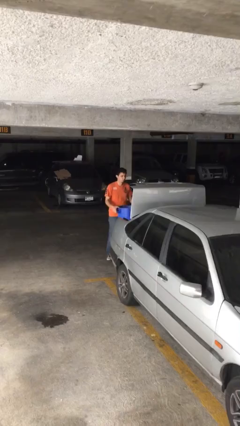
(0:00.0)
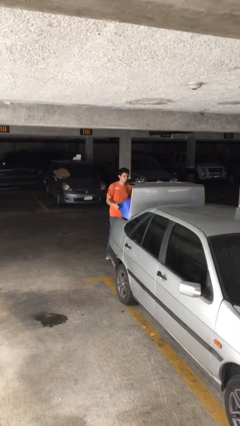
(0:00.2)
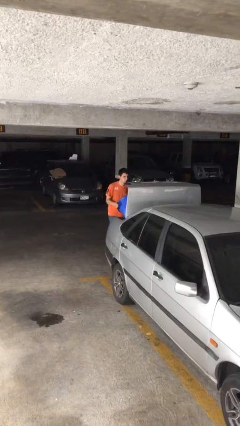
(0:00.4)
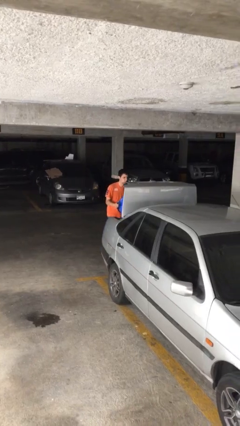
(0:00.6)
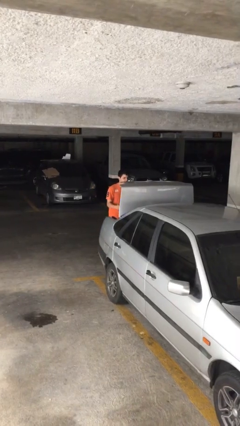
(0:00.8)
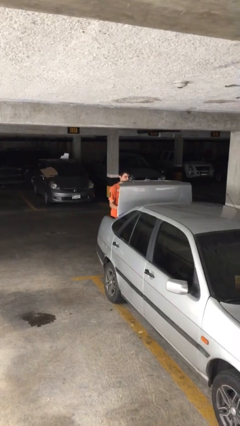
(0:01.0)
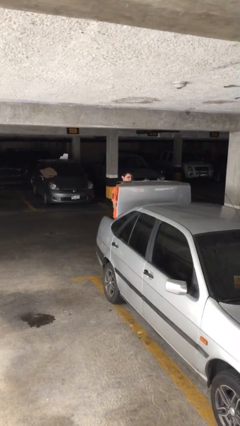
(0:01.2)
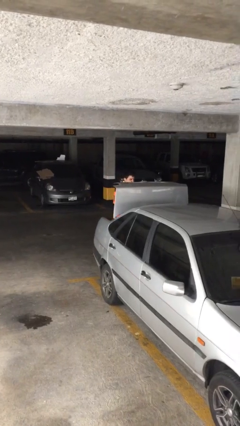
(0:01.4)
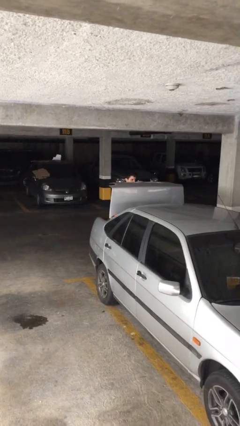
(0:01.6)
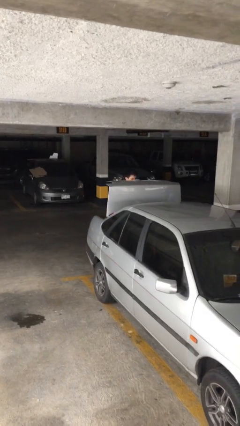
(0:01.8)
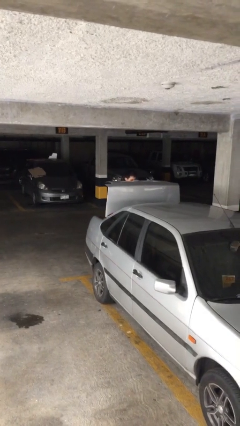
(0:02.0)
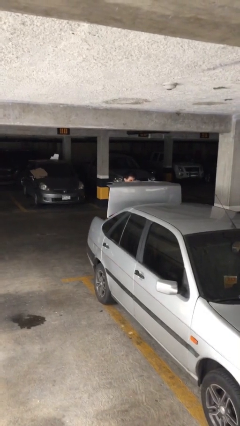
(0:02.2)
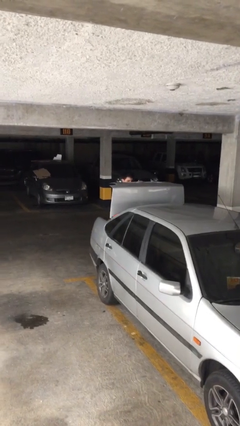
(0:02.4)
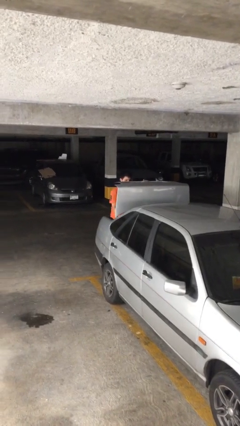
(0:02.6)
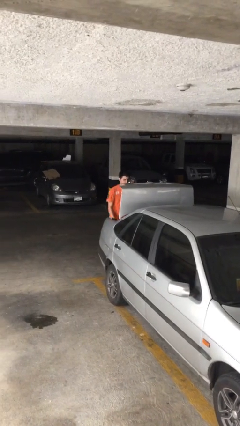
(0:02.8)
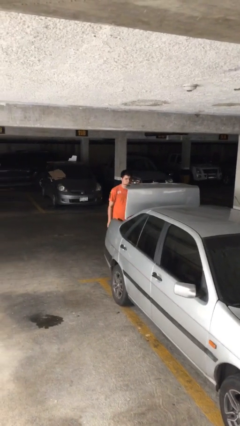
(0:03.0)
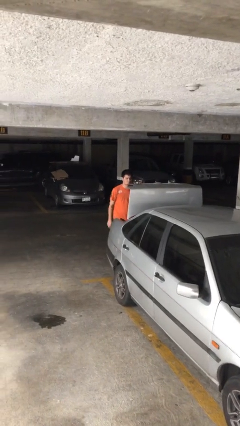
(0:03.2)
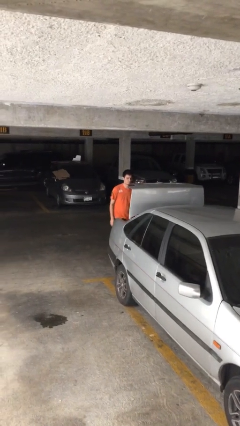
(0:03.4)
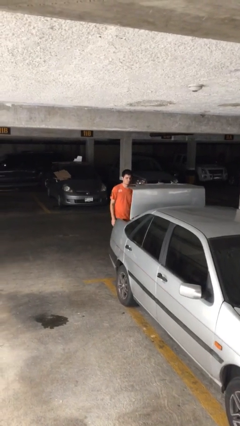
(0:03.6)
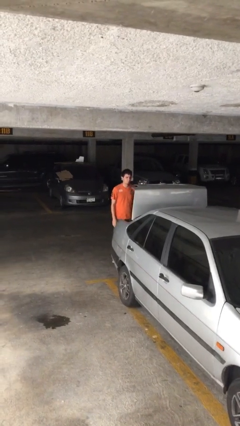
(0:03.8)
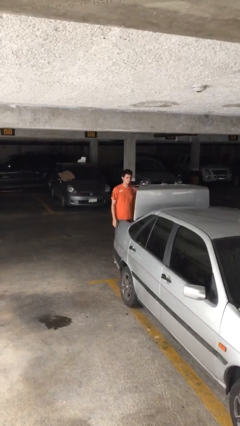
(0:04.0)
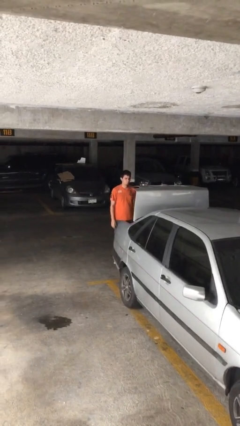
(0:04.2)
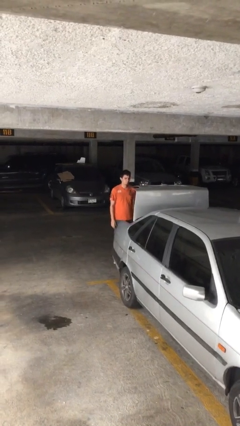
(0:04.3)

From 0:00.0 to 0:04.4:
person loads car

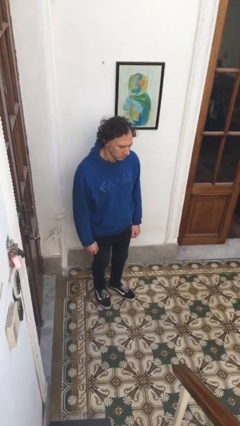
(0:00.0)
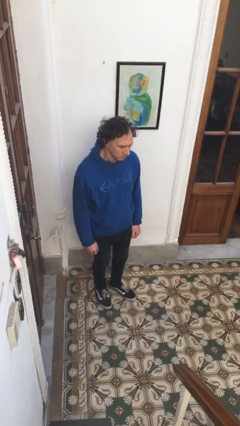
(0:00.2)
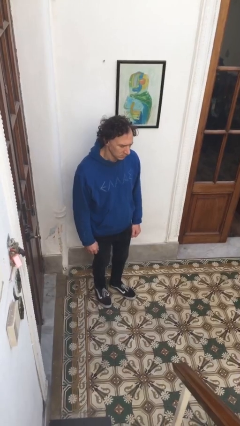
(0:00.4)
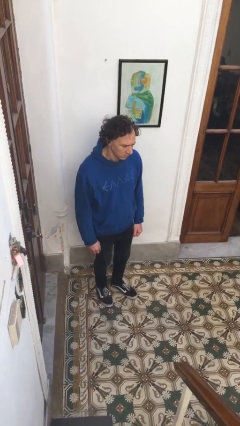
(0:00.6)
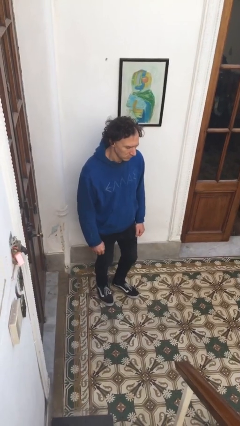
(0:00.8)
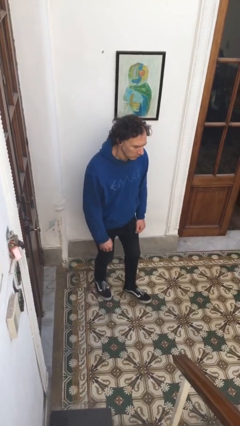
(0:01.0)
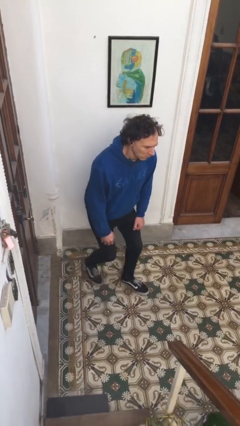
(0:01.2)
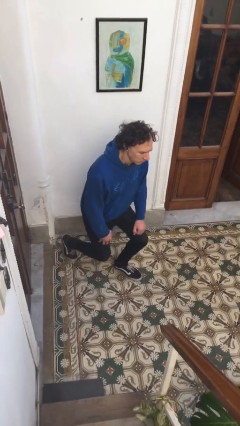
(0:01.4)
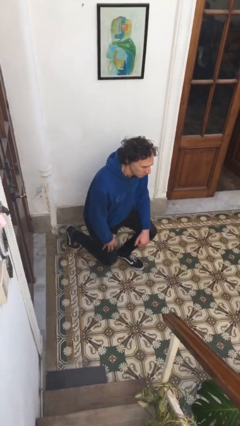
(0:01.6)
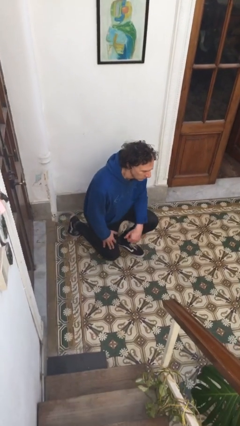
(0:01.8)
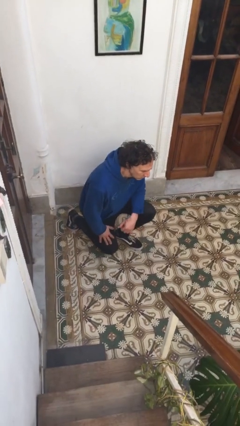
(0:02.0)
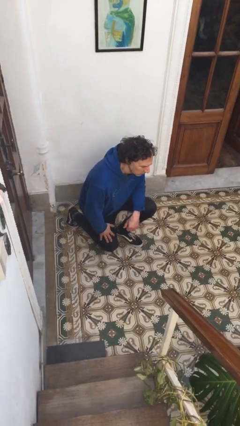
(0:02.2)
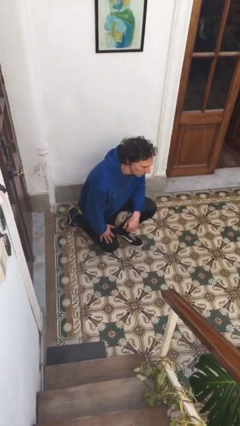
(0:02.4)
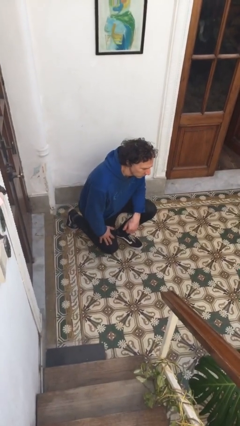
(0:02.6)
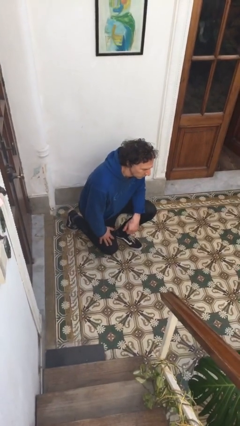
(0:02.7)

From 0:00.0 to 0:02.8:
person kneels

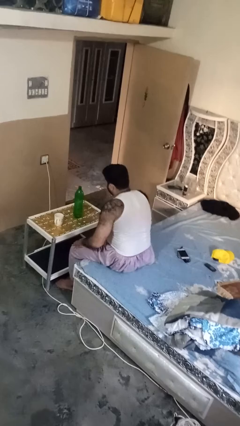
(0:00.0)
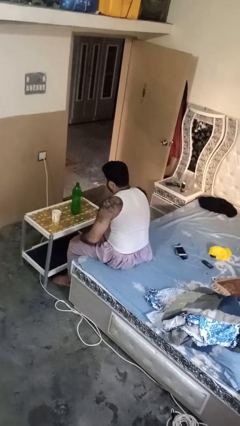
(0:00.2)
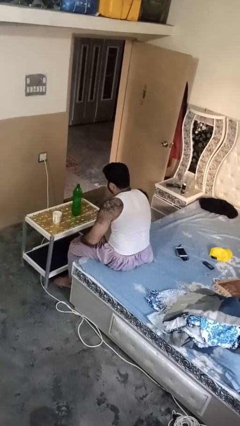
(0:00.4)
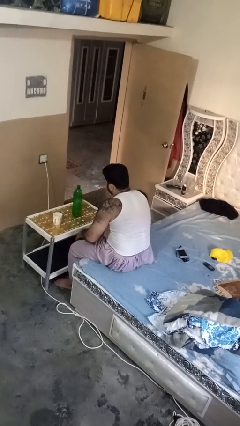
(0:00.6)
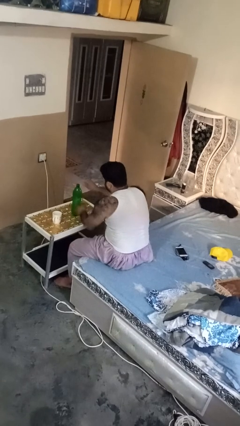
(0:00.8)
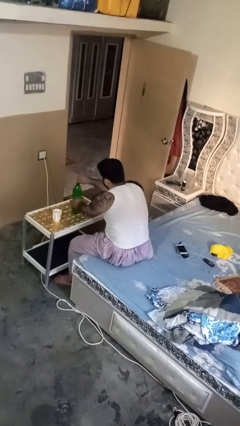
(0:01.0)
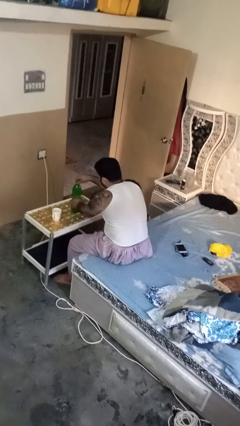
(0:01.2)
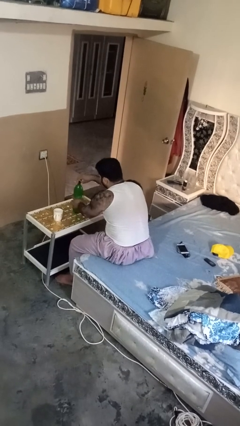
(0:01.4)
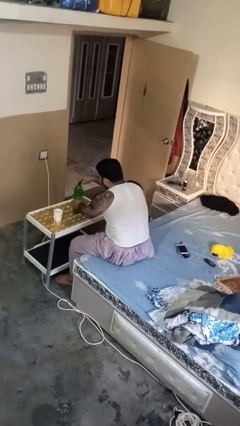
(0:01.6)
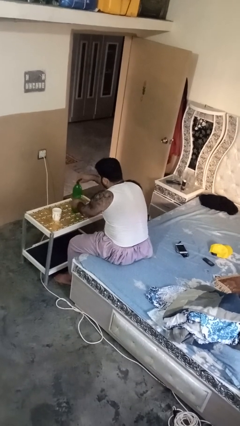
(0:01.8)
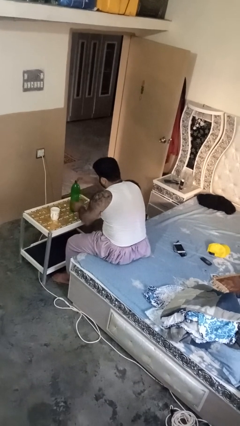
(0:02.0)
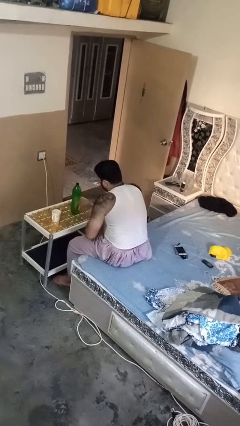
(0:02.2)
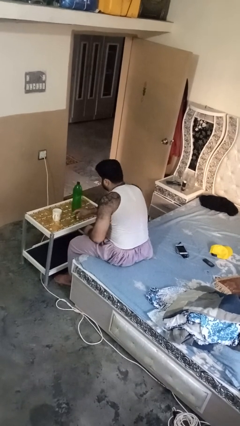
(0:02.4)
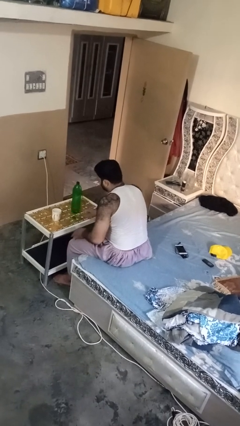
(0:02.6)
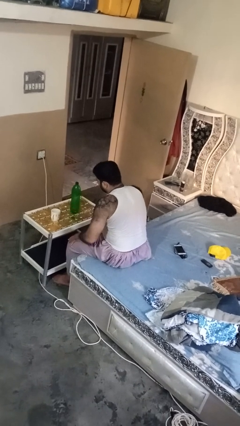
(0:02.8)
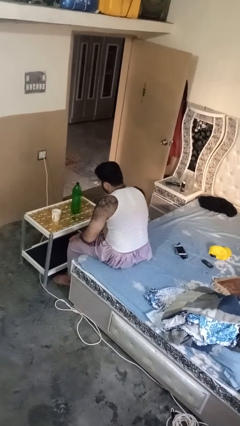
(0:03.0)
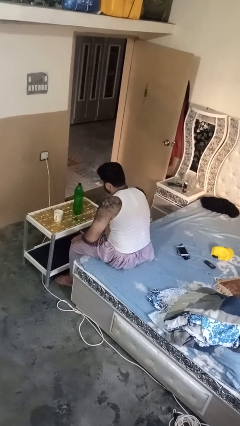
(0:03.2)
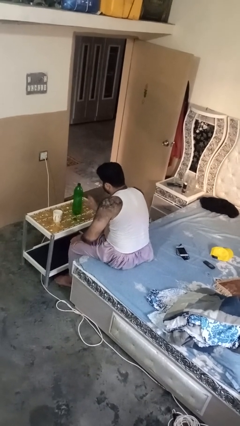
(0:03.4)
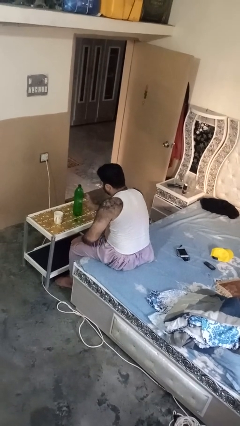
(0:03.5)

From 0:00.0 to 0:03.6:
person unscrews lid from bottle

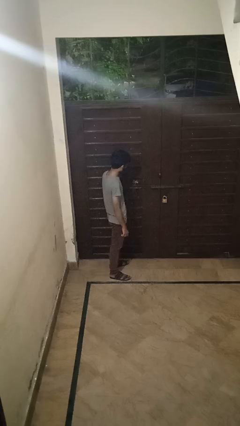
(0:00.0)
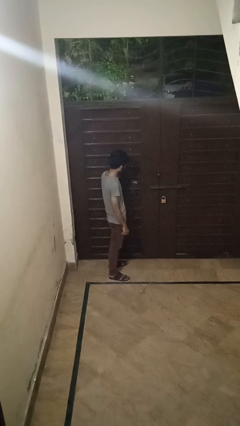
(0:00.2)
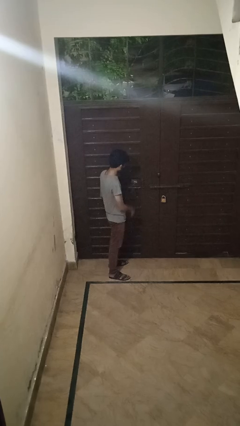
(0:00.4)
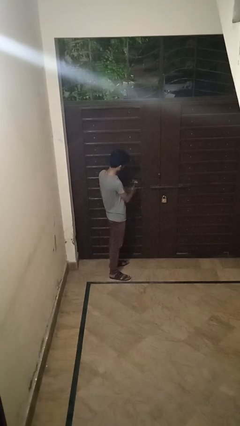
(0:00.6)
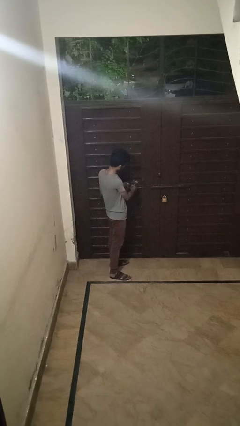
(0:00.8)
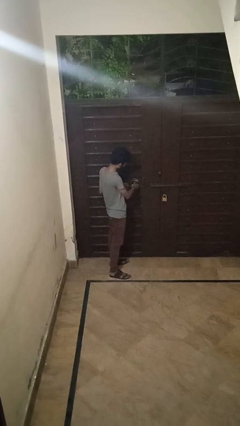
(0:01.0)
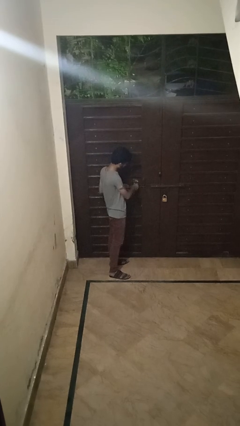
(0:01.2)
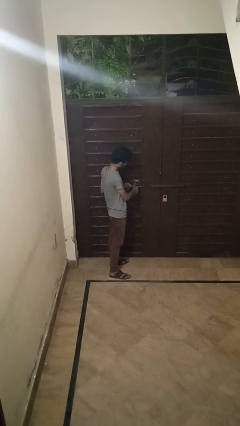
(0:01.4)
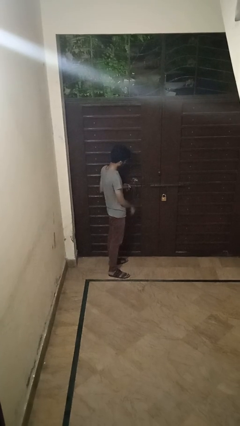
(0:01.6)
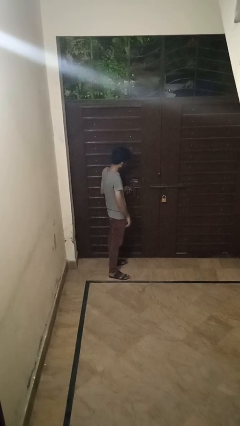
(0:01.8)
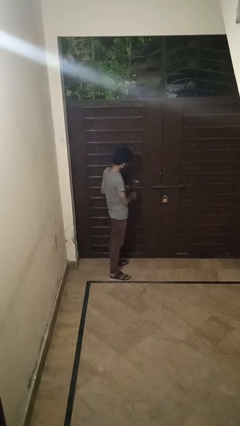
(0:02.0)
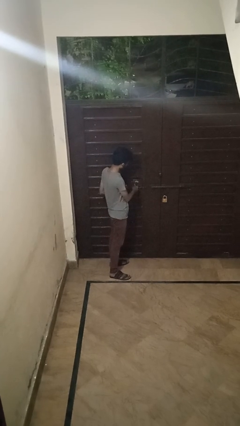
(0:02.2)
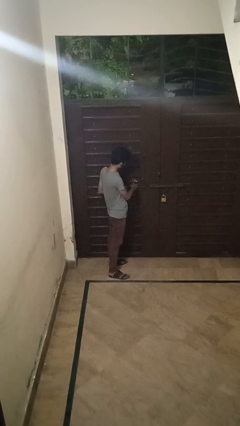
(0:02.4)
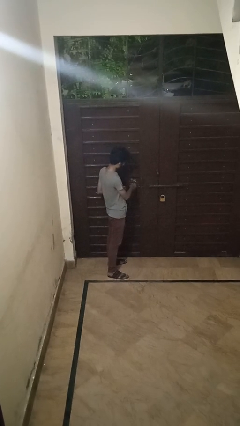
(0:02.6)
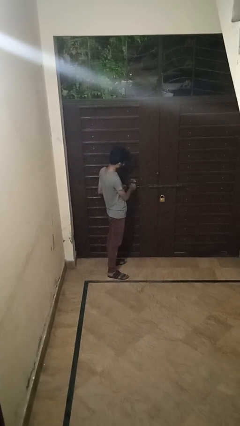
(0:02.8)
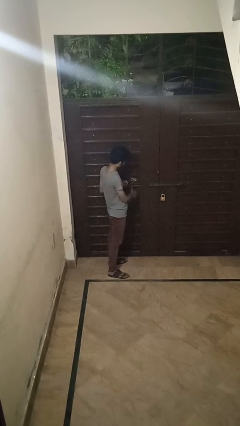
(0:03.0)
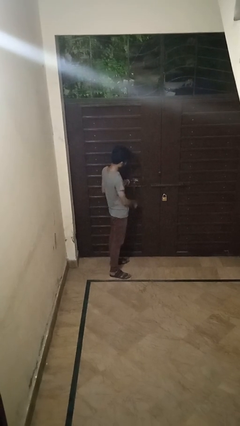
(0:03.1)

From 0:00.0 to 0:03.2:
person unlocks door with keys

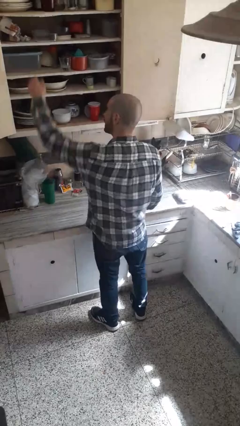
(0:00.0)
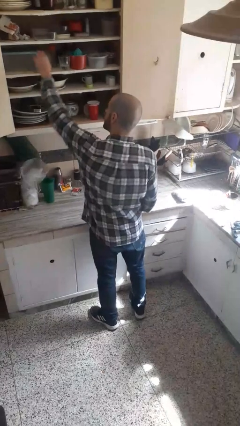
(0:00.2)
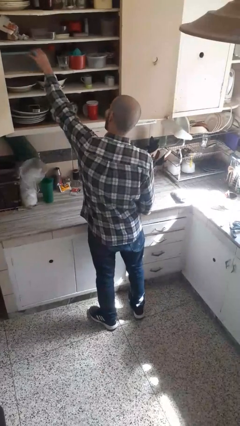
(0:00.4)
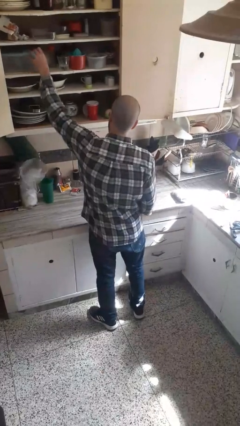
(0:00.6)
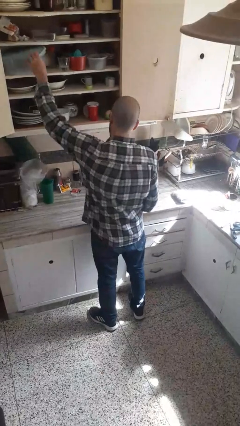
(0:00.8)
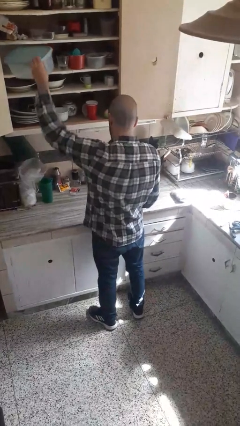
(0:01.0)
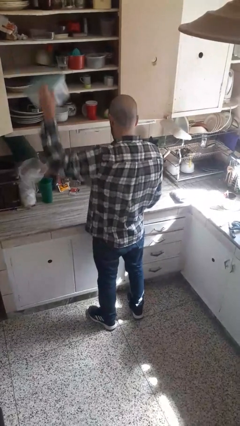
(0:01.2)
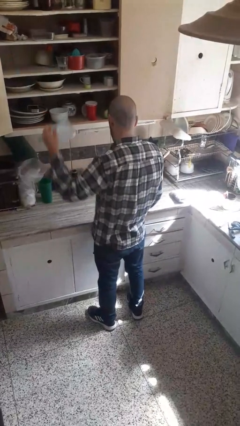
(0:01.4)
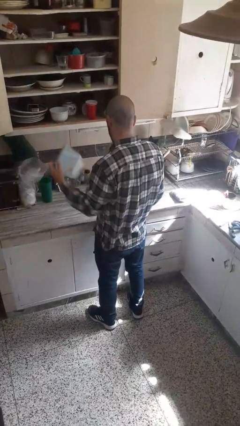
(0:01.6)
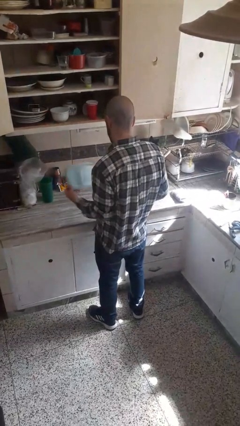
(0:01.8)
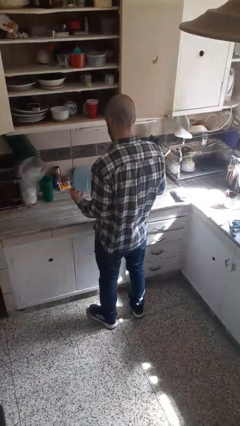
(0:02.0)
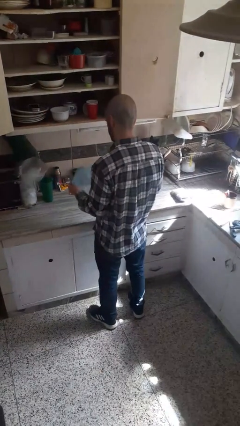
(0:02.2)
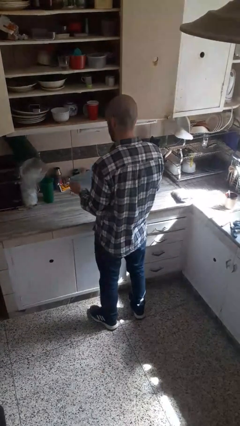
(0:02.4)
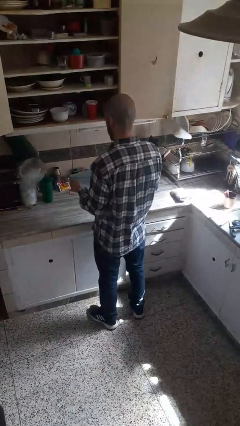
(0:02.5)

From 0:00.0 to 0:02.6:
person picks up object from cabinet

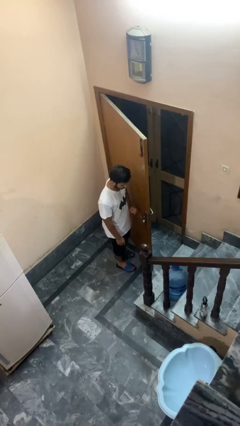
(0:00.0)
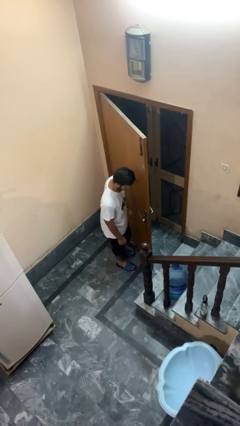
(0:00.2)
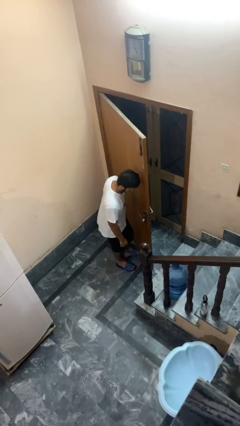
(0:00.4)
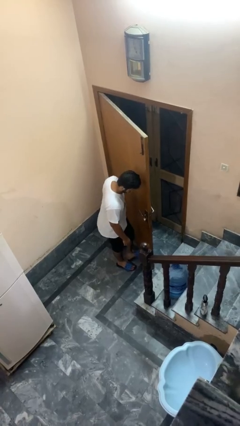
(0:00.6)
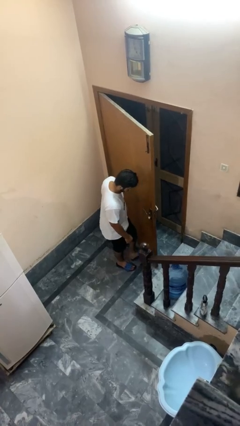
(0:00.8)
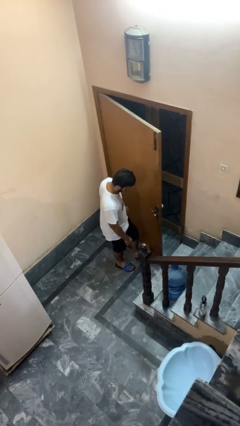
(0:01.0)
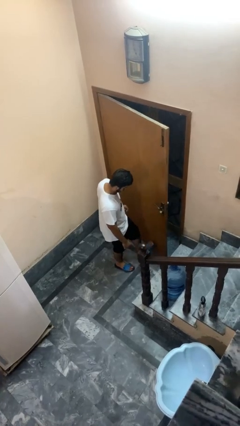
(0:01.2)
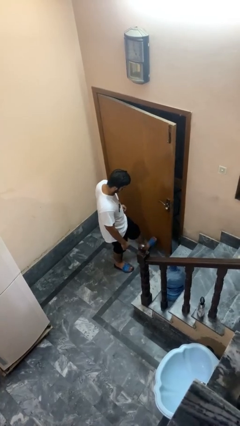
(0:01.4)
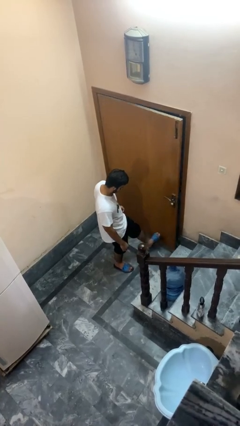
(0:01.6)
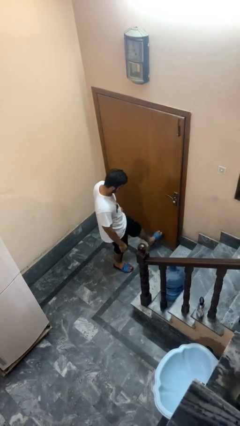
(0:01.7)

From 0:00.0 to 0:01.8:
person closes door with foot
